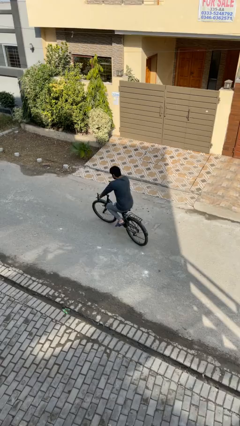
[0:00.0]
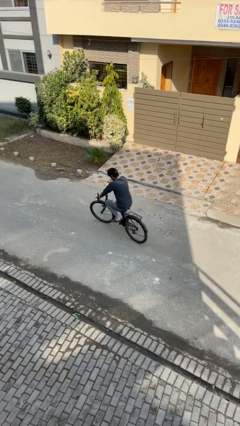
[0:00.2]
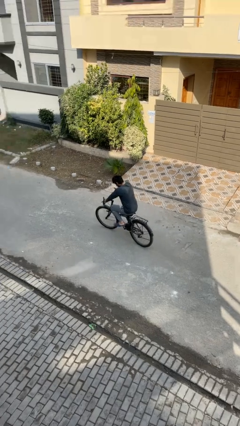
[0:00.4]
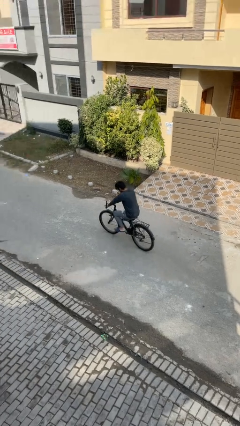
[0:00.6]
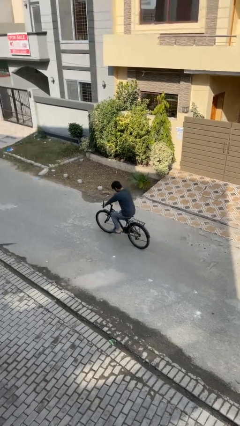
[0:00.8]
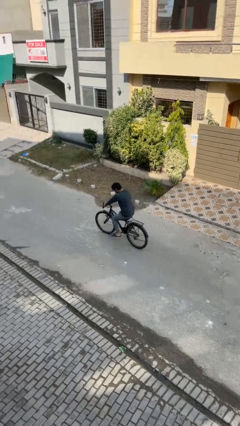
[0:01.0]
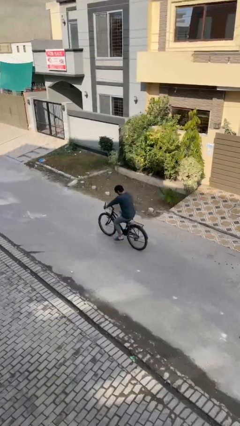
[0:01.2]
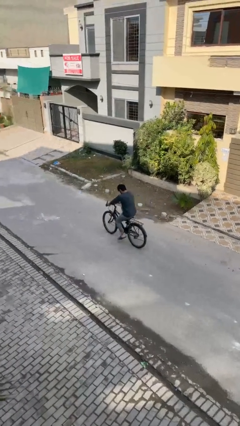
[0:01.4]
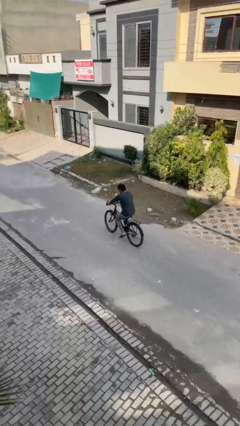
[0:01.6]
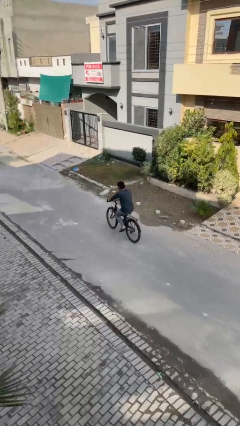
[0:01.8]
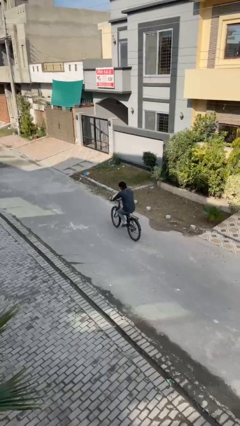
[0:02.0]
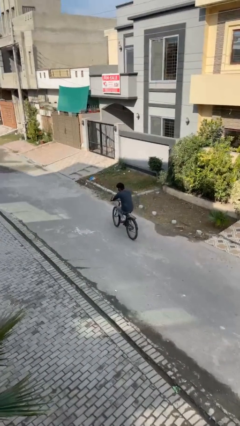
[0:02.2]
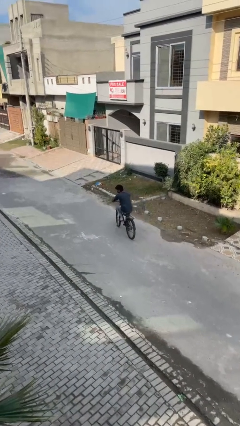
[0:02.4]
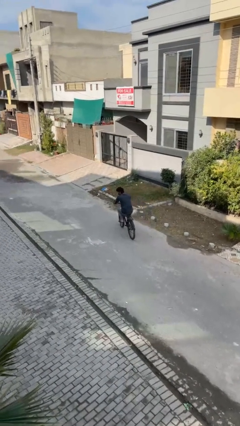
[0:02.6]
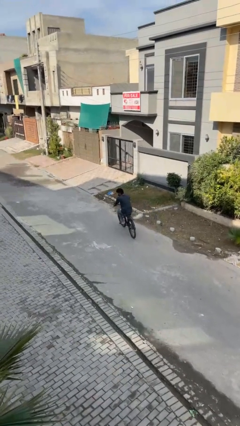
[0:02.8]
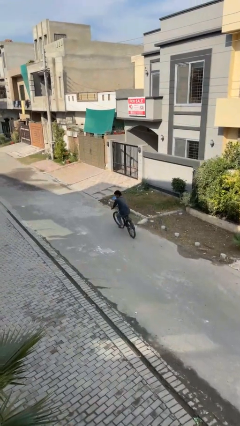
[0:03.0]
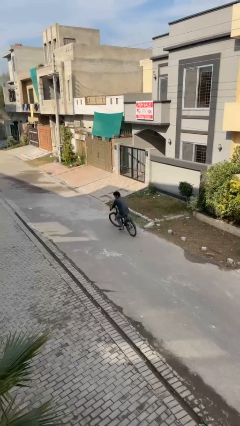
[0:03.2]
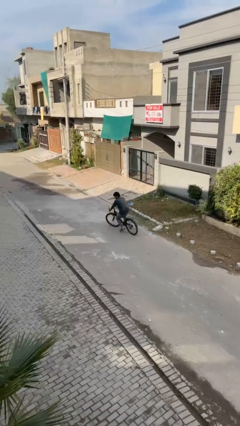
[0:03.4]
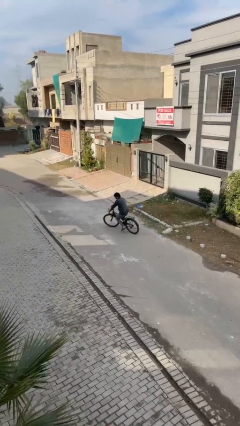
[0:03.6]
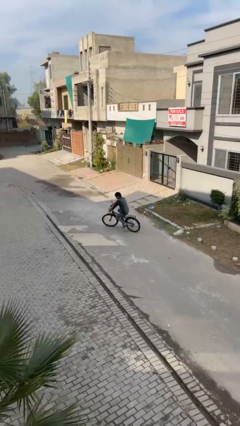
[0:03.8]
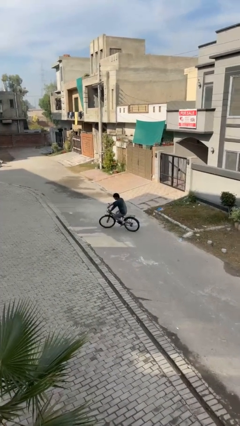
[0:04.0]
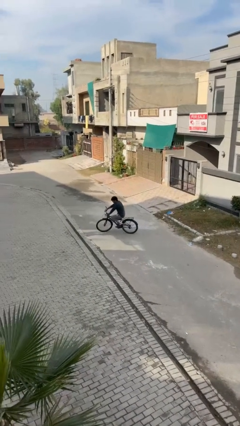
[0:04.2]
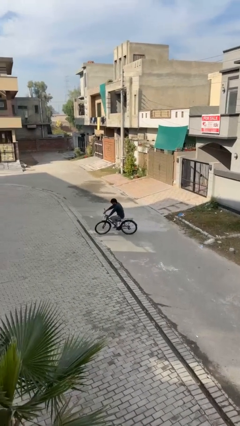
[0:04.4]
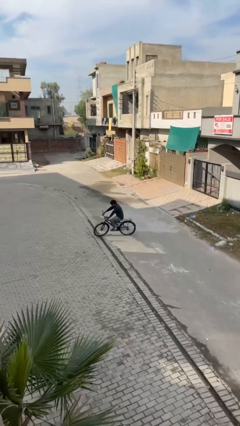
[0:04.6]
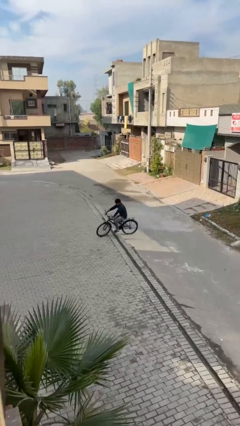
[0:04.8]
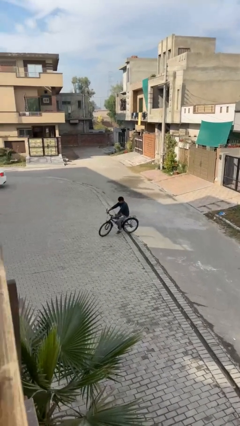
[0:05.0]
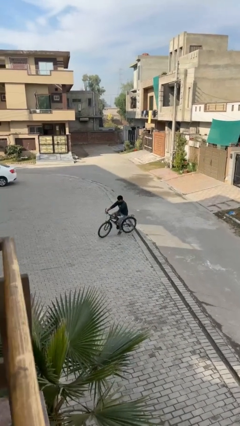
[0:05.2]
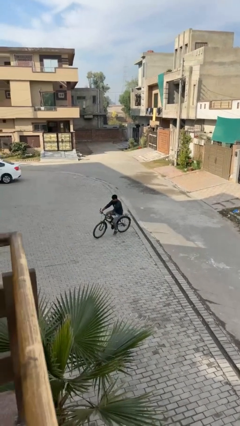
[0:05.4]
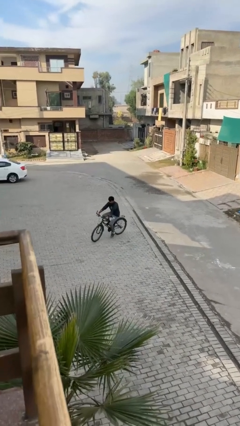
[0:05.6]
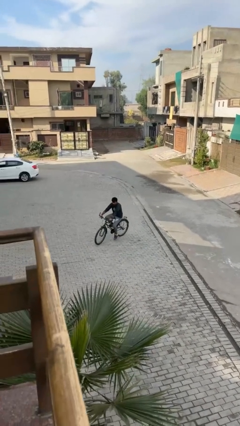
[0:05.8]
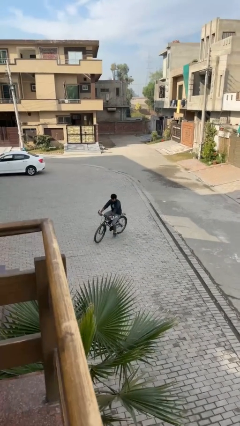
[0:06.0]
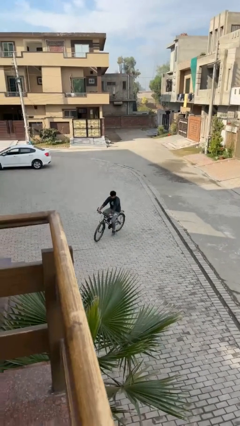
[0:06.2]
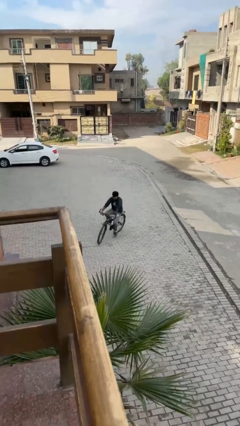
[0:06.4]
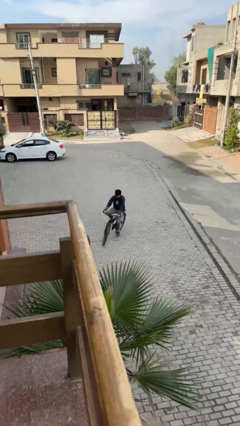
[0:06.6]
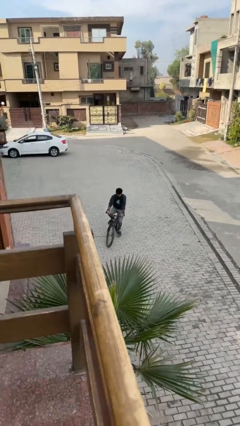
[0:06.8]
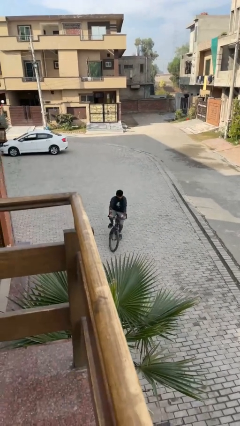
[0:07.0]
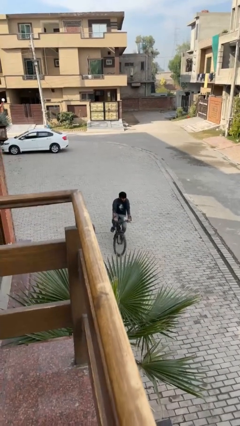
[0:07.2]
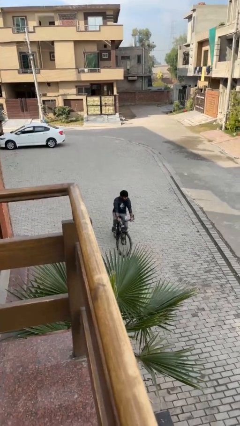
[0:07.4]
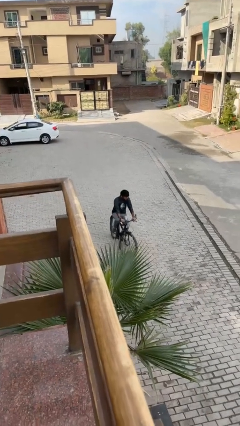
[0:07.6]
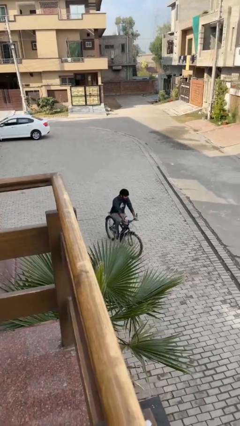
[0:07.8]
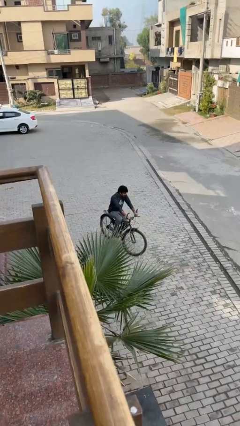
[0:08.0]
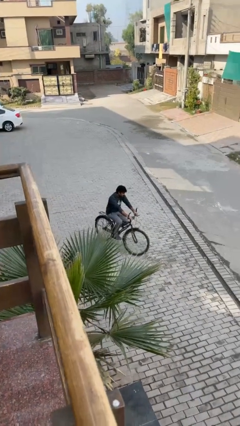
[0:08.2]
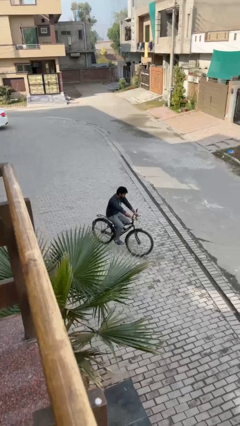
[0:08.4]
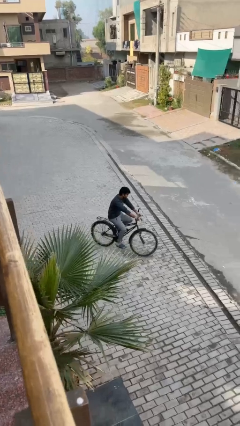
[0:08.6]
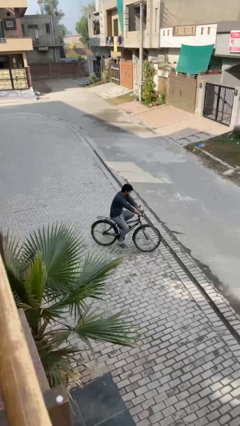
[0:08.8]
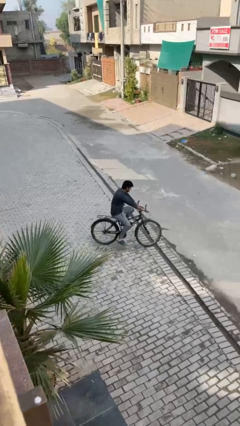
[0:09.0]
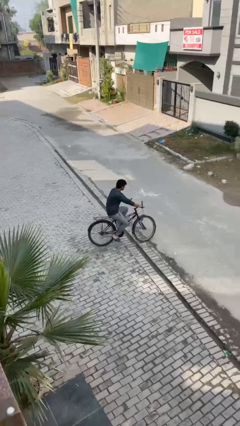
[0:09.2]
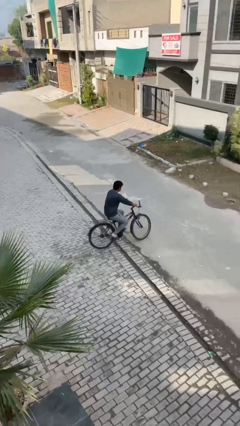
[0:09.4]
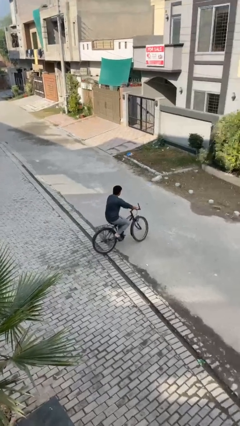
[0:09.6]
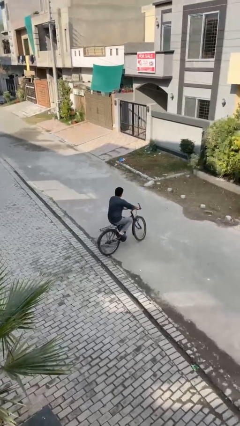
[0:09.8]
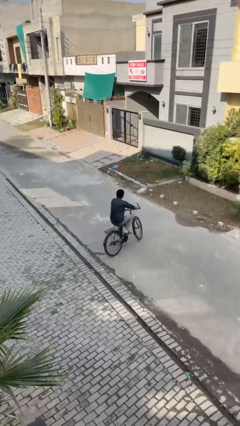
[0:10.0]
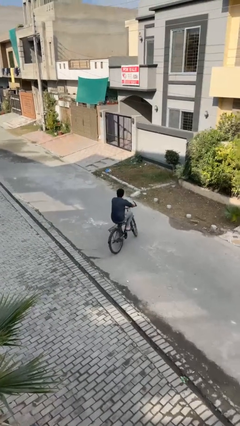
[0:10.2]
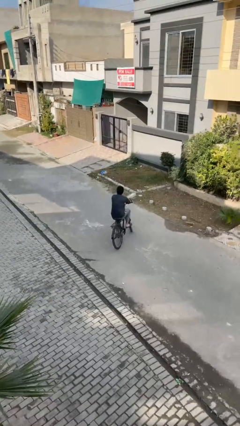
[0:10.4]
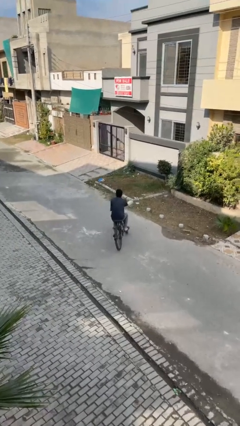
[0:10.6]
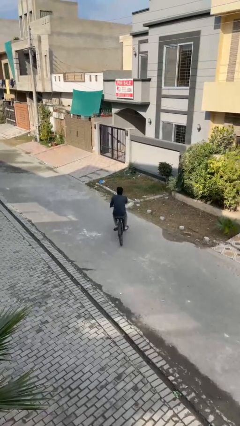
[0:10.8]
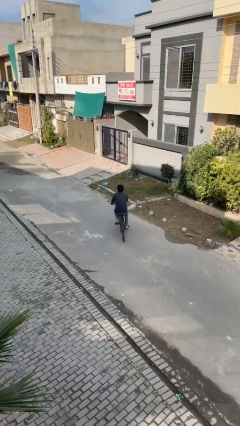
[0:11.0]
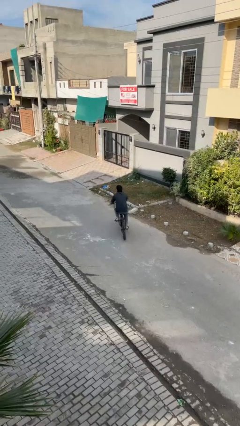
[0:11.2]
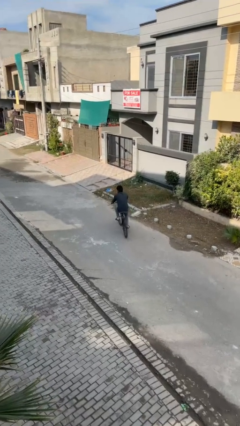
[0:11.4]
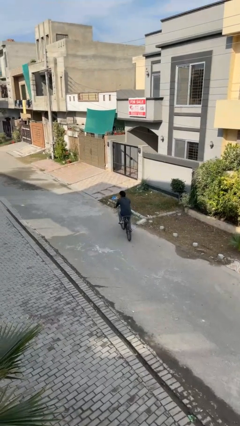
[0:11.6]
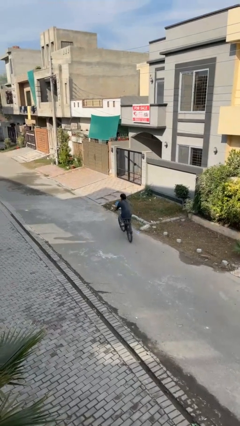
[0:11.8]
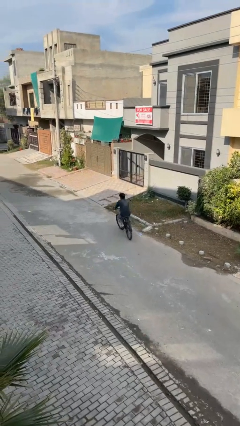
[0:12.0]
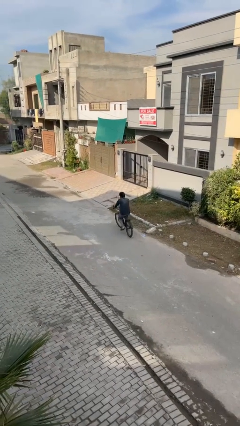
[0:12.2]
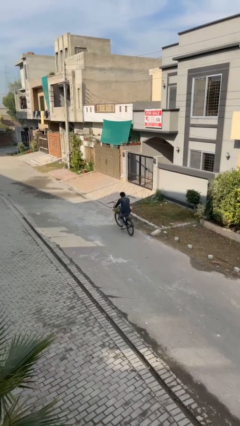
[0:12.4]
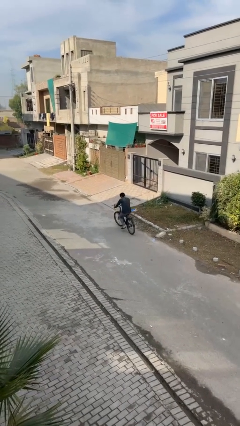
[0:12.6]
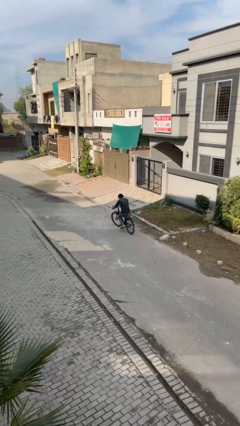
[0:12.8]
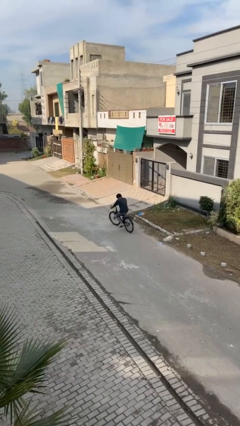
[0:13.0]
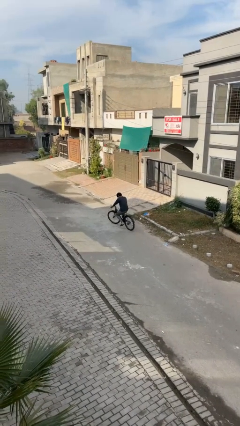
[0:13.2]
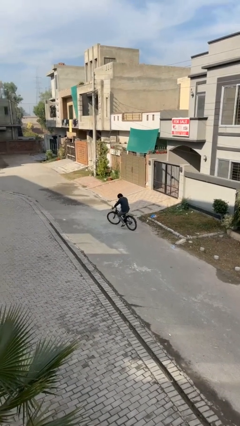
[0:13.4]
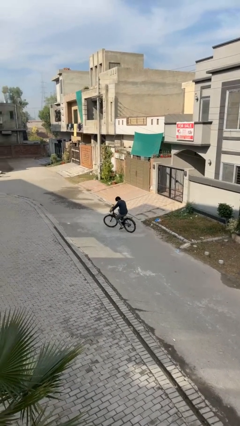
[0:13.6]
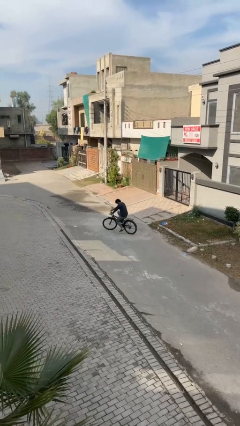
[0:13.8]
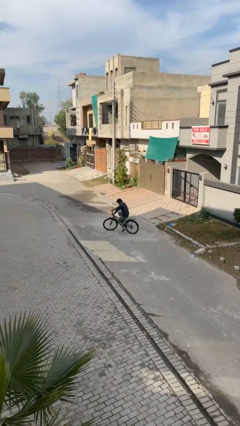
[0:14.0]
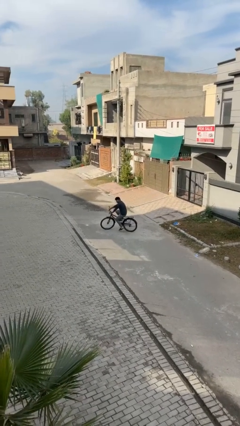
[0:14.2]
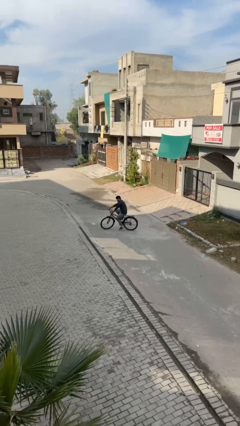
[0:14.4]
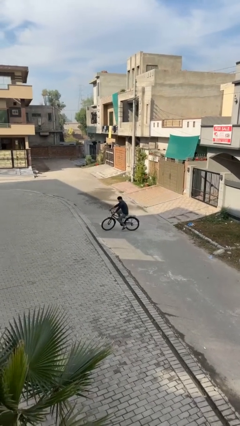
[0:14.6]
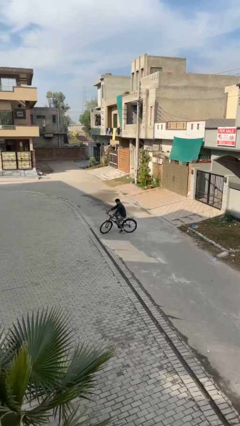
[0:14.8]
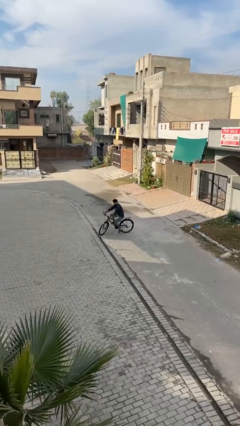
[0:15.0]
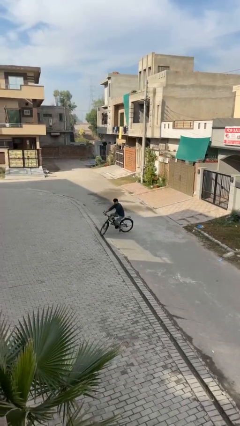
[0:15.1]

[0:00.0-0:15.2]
person rides bicycle

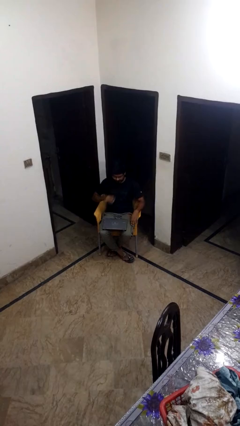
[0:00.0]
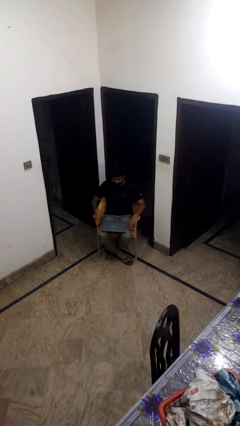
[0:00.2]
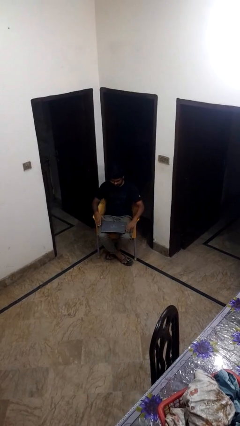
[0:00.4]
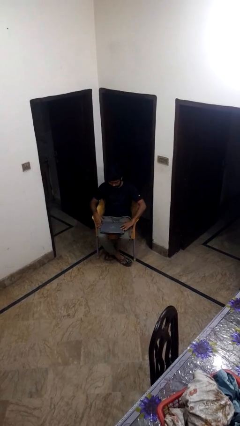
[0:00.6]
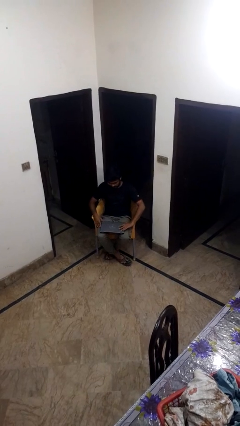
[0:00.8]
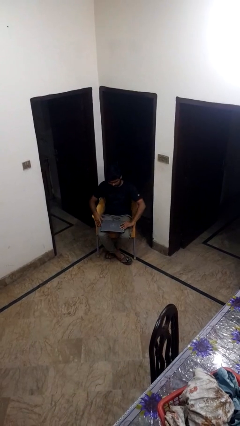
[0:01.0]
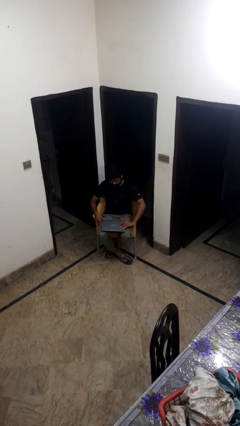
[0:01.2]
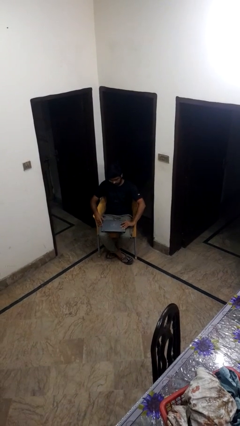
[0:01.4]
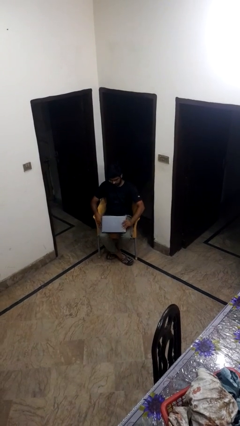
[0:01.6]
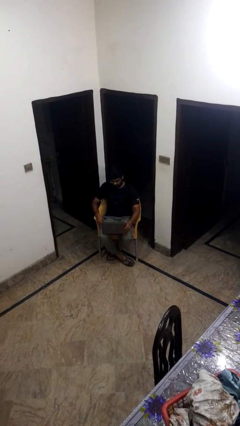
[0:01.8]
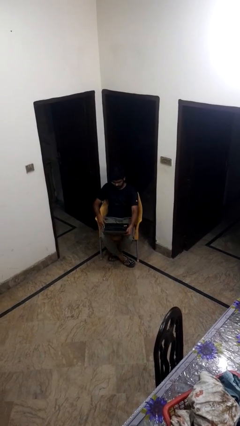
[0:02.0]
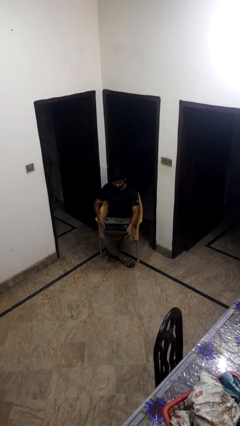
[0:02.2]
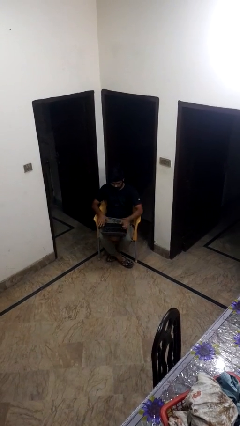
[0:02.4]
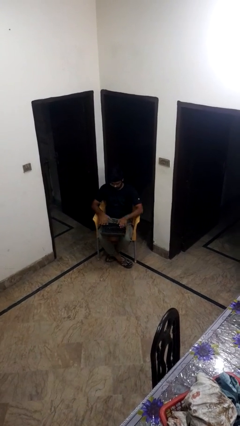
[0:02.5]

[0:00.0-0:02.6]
person opens laptop

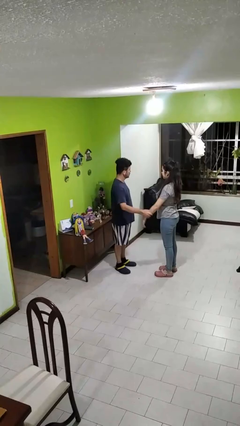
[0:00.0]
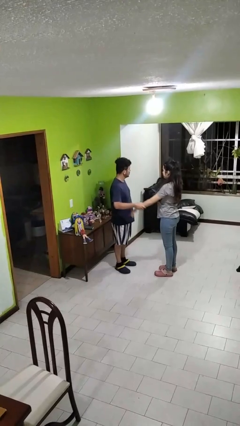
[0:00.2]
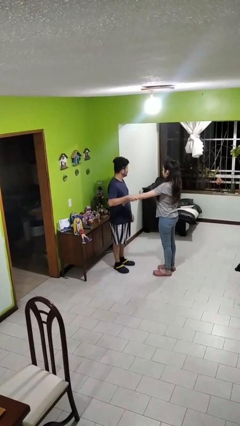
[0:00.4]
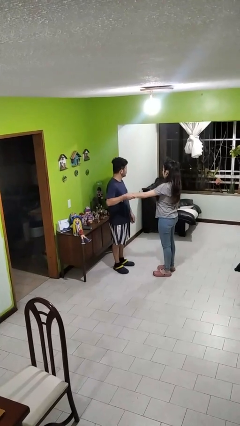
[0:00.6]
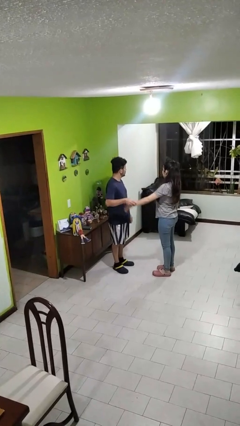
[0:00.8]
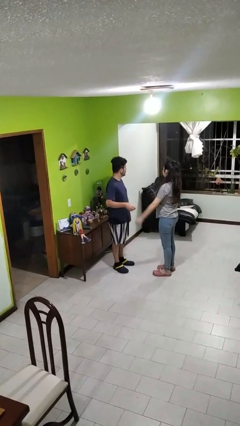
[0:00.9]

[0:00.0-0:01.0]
person grabs person by forearm
